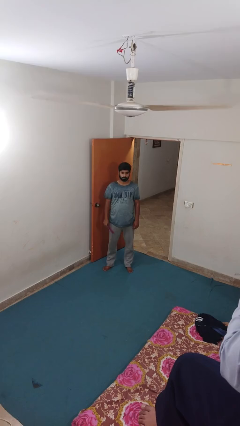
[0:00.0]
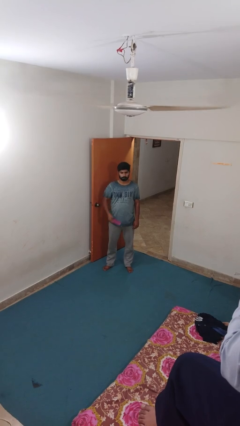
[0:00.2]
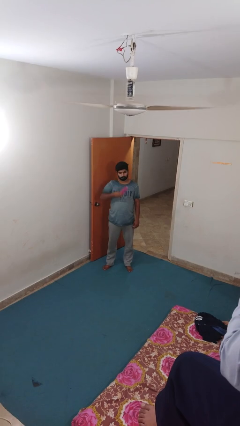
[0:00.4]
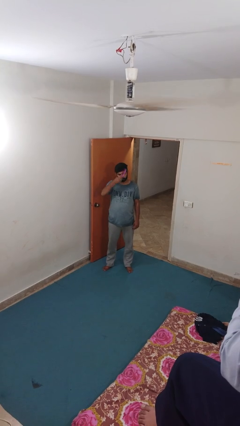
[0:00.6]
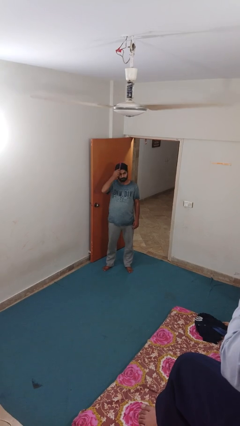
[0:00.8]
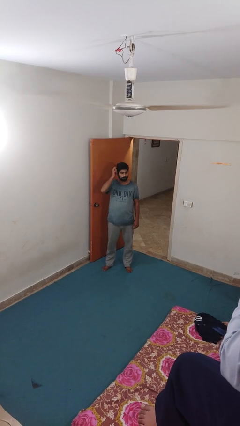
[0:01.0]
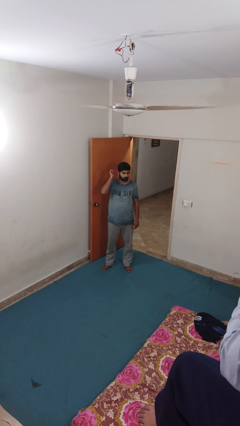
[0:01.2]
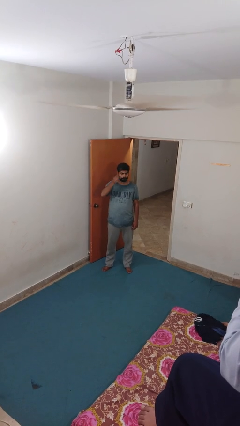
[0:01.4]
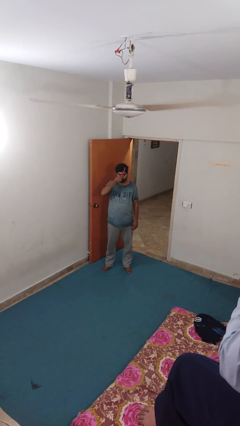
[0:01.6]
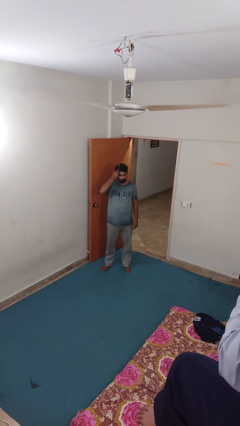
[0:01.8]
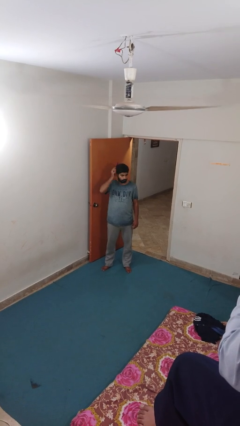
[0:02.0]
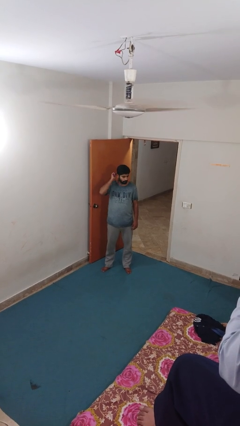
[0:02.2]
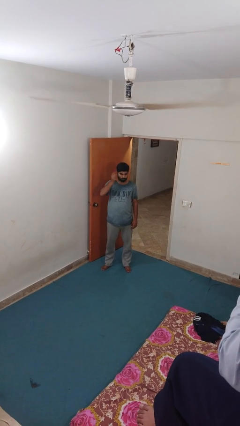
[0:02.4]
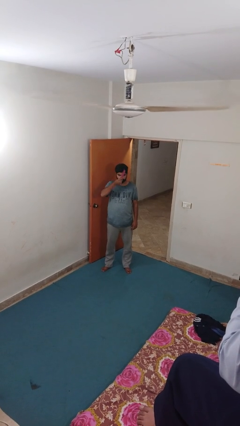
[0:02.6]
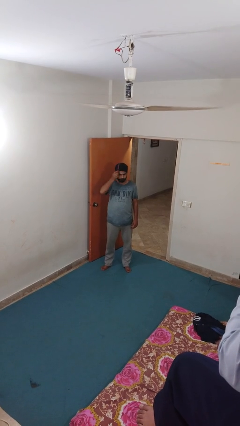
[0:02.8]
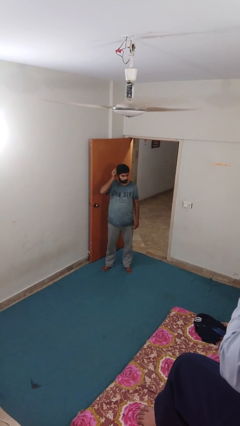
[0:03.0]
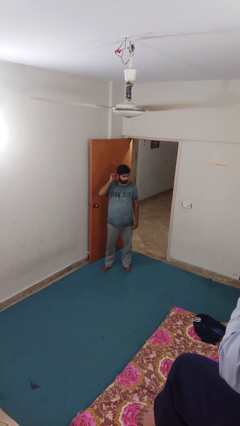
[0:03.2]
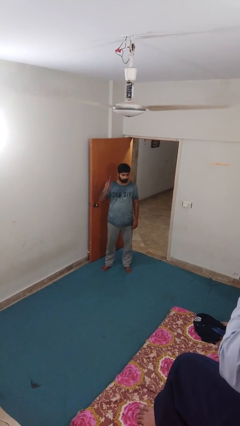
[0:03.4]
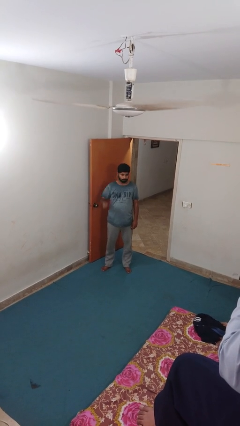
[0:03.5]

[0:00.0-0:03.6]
person brushes hair

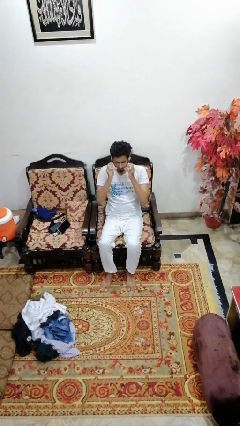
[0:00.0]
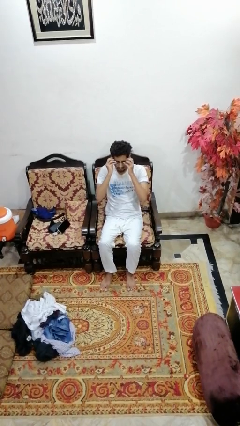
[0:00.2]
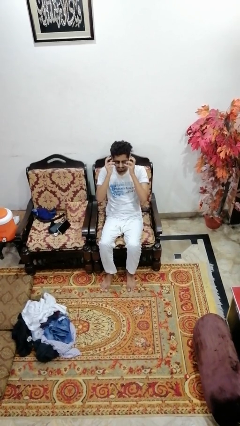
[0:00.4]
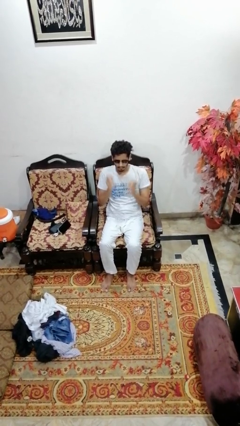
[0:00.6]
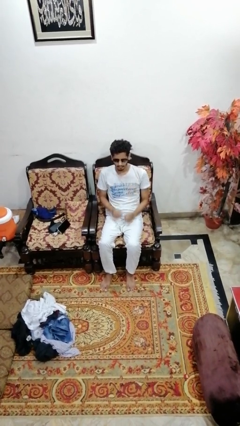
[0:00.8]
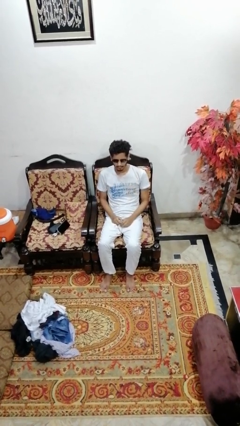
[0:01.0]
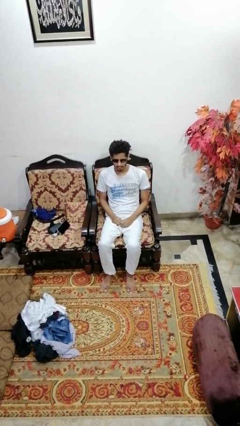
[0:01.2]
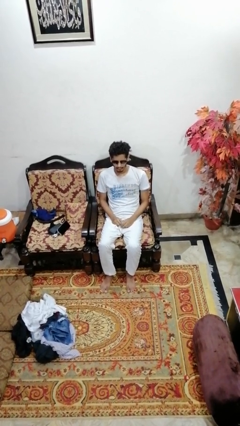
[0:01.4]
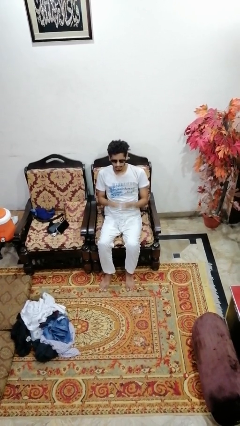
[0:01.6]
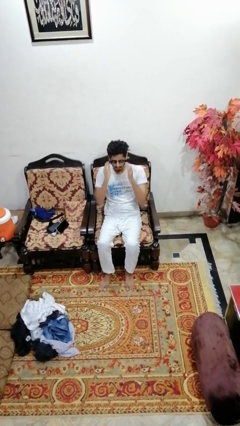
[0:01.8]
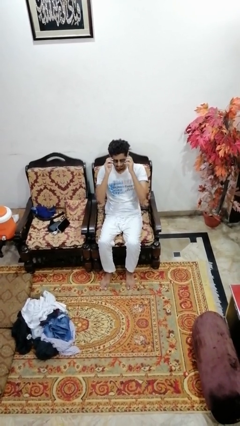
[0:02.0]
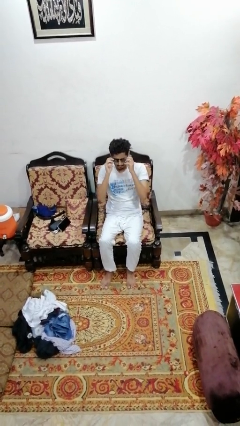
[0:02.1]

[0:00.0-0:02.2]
person puts on sunglasses

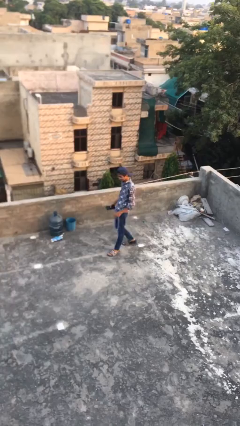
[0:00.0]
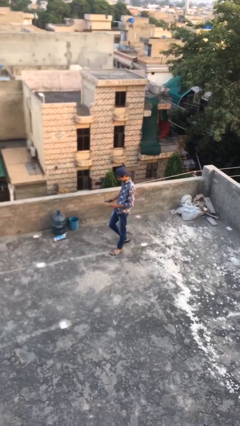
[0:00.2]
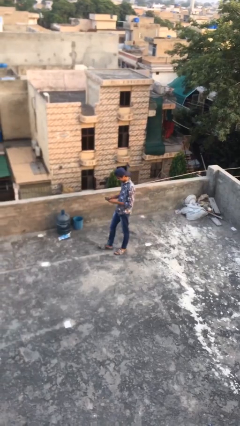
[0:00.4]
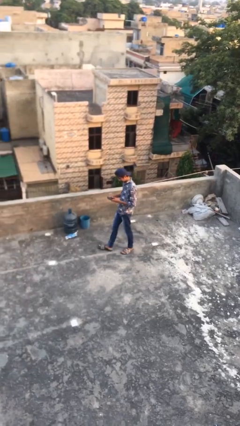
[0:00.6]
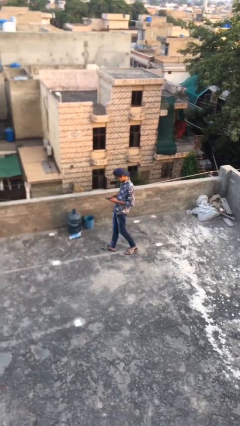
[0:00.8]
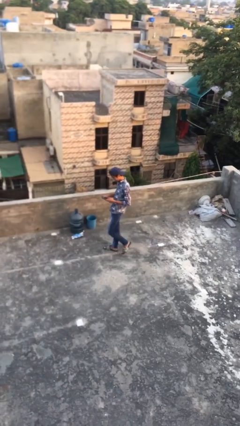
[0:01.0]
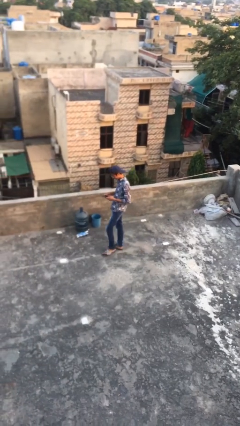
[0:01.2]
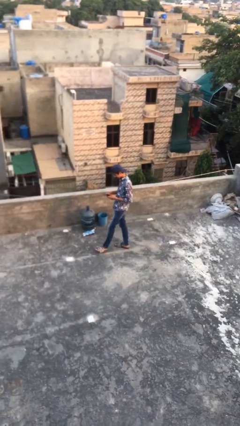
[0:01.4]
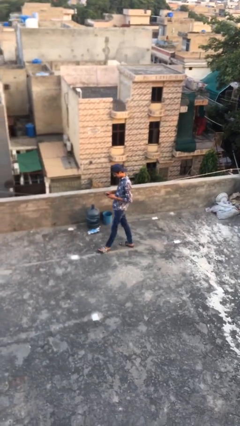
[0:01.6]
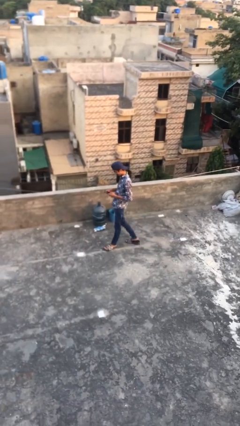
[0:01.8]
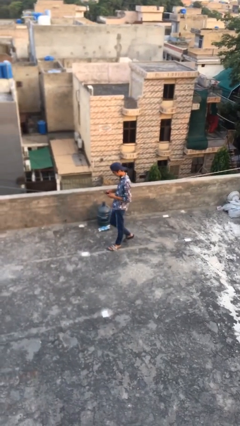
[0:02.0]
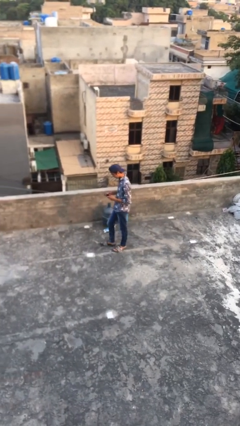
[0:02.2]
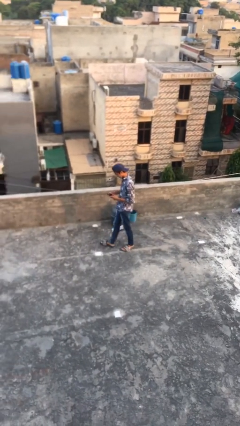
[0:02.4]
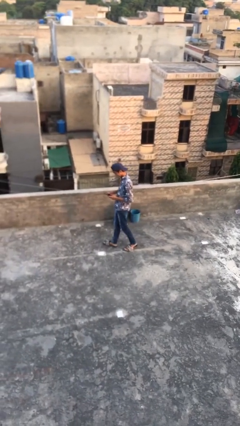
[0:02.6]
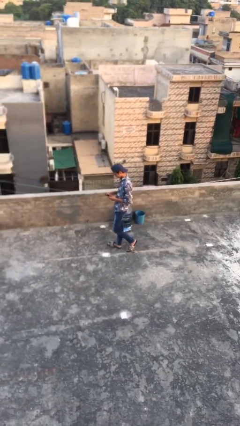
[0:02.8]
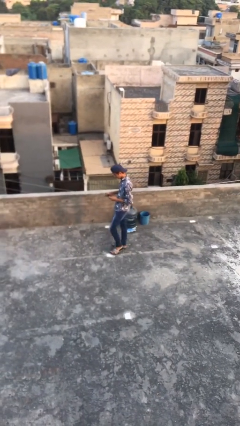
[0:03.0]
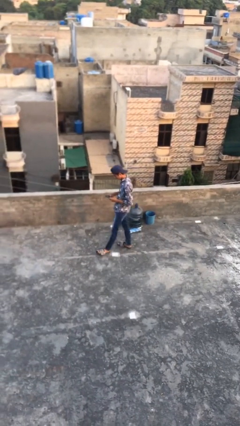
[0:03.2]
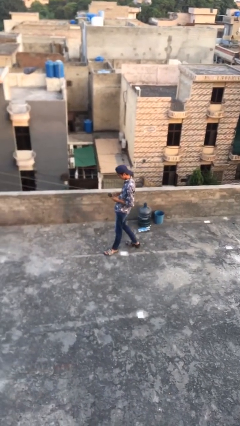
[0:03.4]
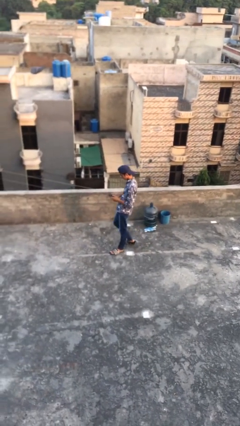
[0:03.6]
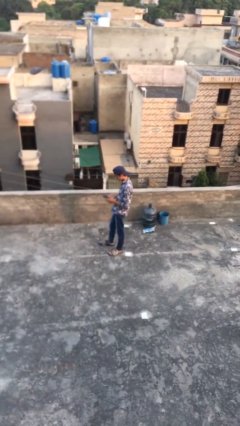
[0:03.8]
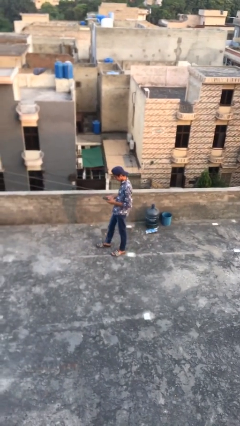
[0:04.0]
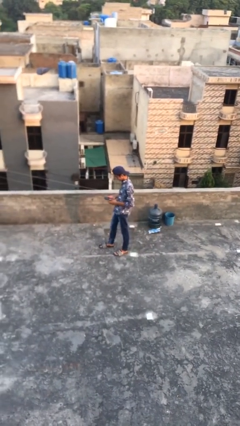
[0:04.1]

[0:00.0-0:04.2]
person texts on phone

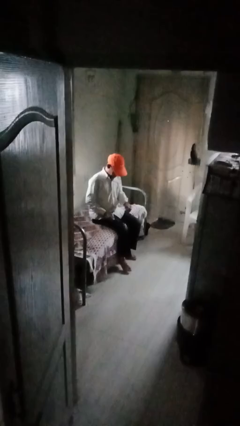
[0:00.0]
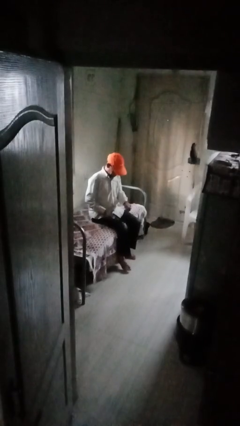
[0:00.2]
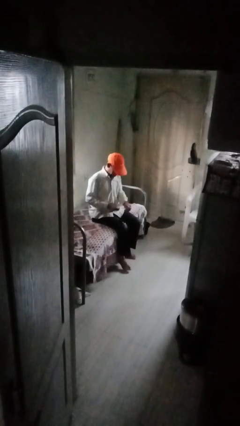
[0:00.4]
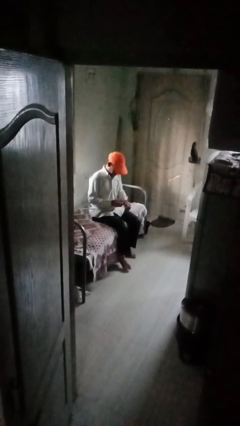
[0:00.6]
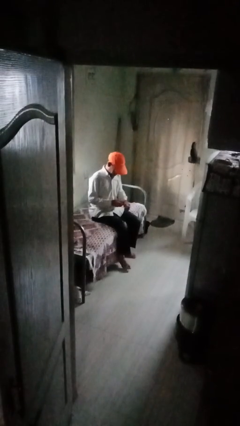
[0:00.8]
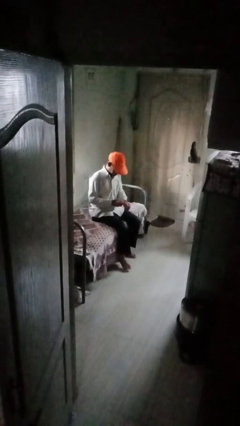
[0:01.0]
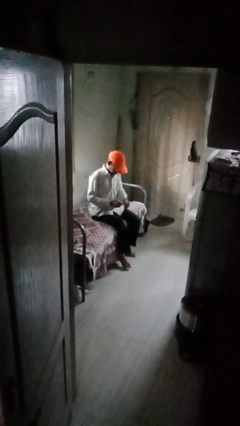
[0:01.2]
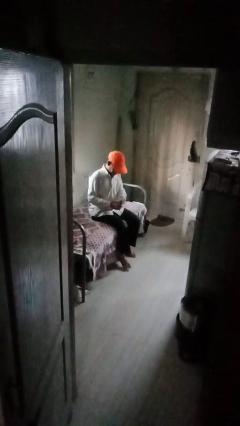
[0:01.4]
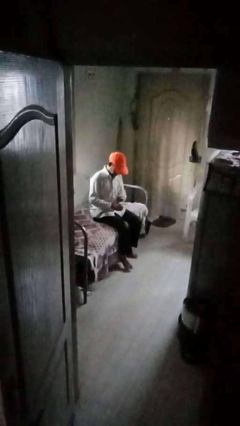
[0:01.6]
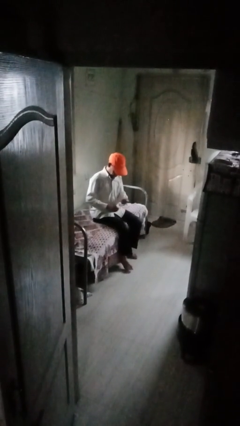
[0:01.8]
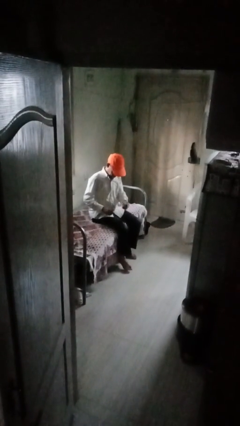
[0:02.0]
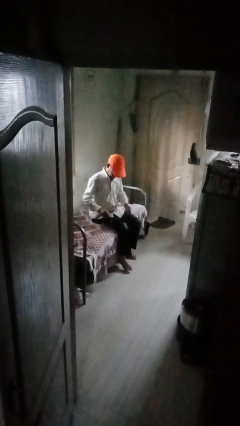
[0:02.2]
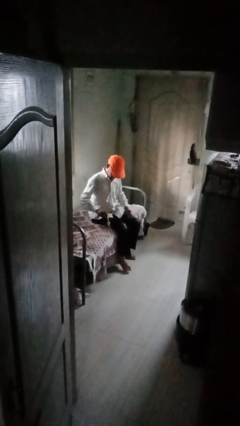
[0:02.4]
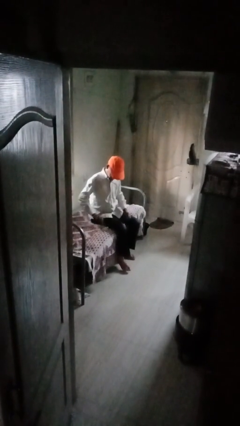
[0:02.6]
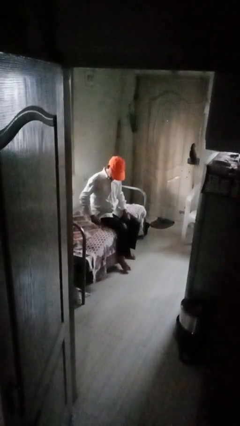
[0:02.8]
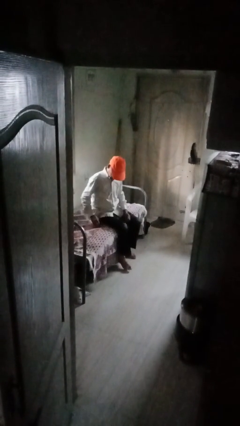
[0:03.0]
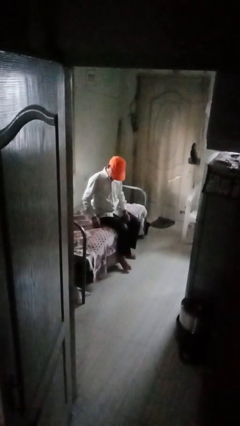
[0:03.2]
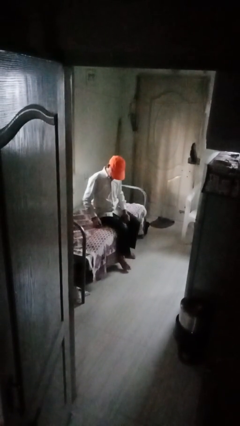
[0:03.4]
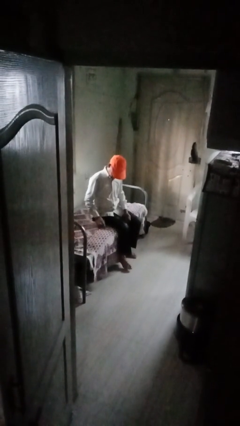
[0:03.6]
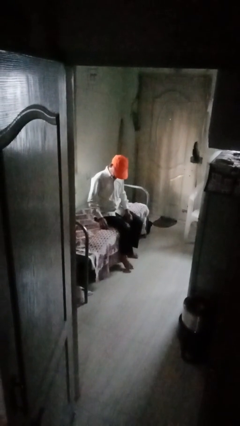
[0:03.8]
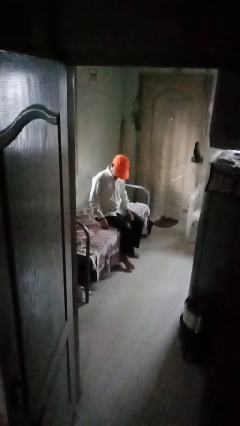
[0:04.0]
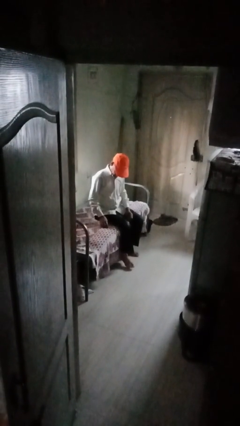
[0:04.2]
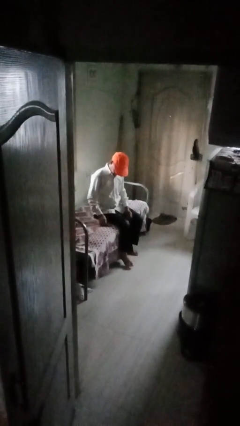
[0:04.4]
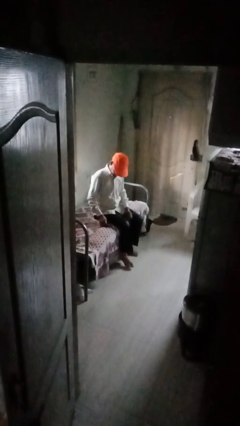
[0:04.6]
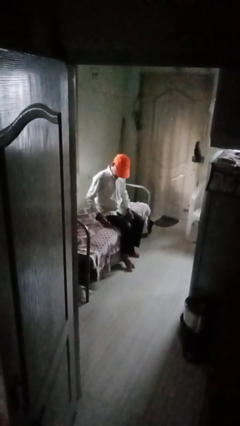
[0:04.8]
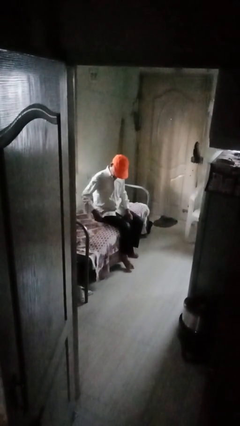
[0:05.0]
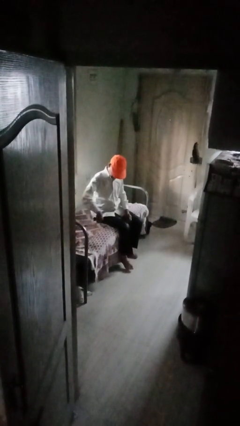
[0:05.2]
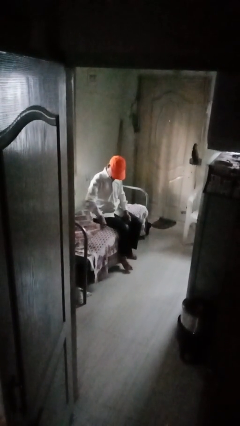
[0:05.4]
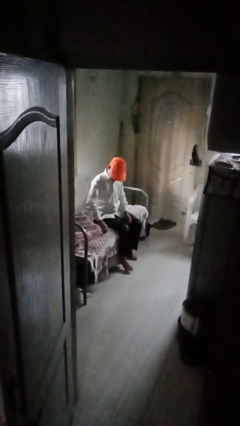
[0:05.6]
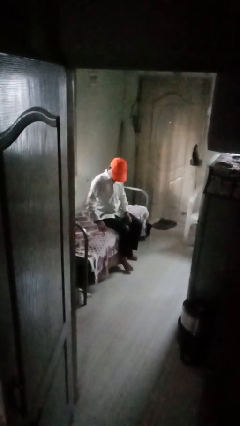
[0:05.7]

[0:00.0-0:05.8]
person takes off wristwatch

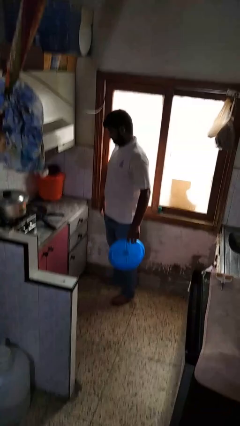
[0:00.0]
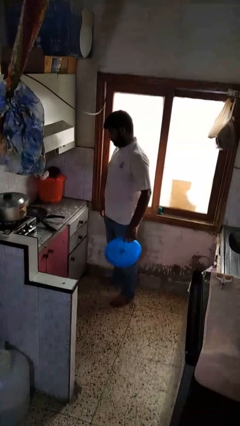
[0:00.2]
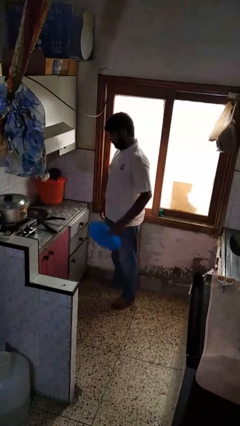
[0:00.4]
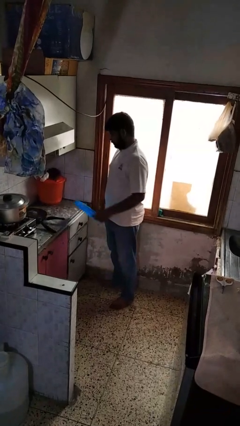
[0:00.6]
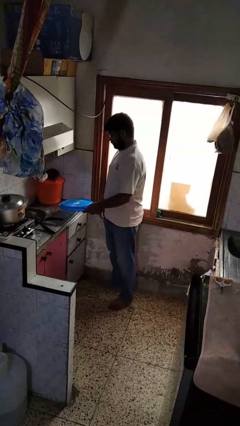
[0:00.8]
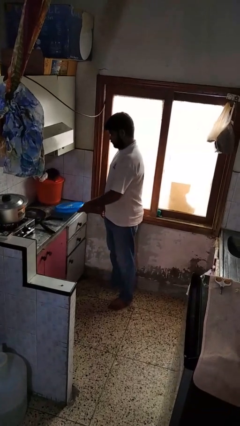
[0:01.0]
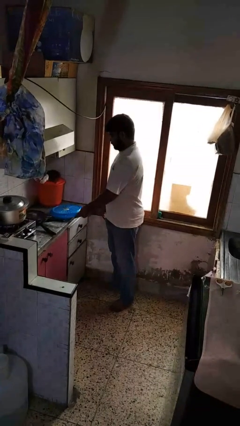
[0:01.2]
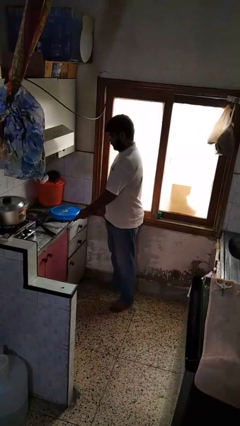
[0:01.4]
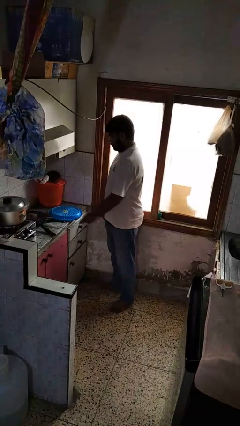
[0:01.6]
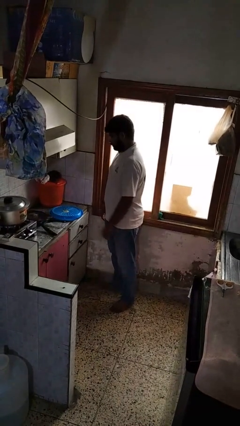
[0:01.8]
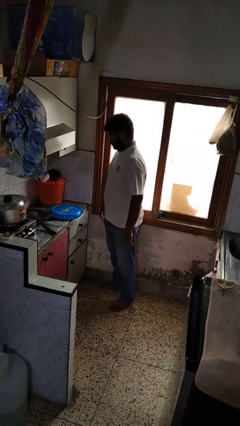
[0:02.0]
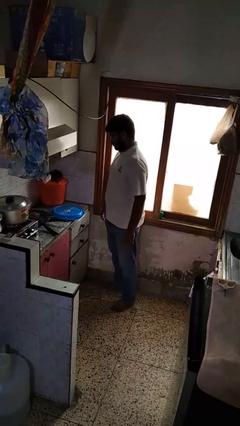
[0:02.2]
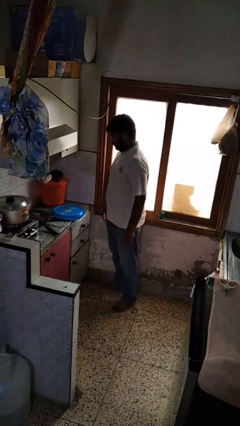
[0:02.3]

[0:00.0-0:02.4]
person puts down object on countertop
